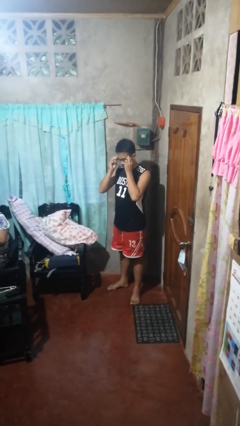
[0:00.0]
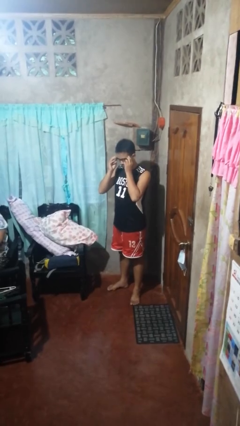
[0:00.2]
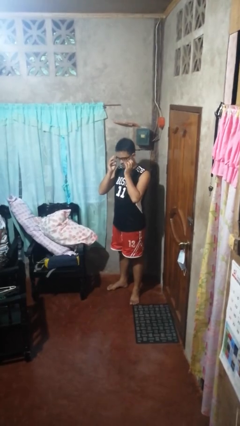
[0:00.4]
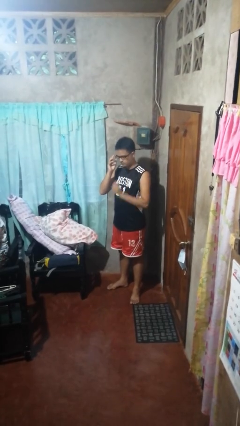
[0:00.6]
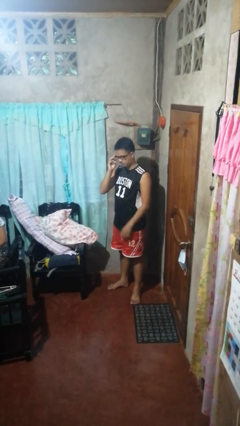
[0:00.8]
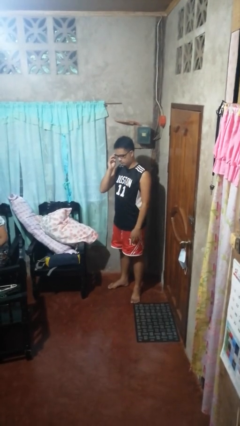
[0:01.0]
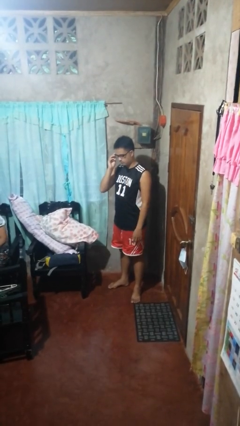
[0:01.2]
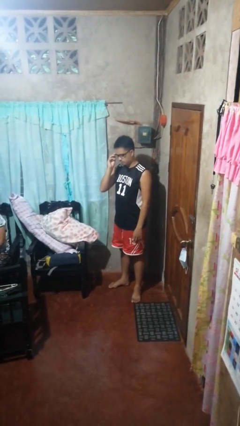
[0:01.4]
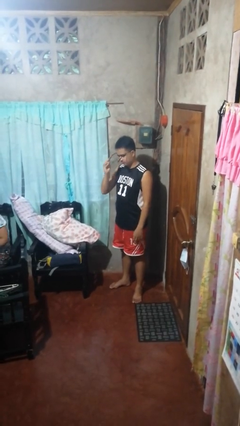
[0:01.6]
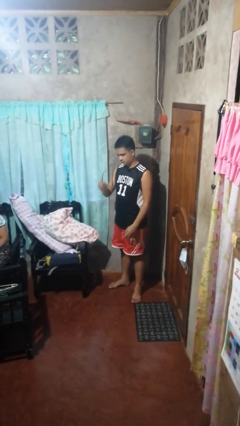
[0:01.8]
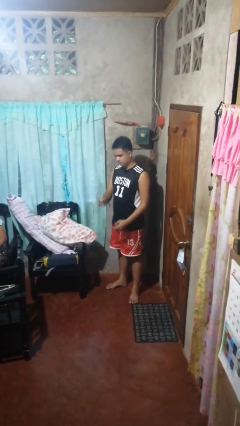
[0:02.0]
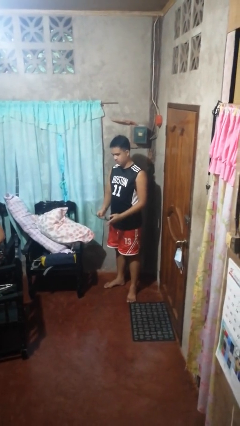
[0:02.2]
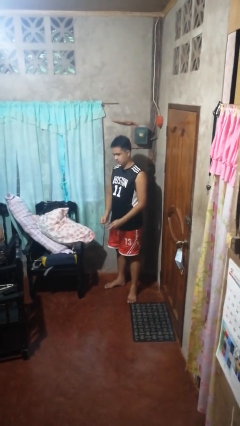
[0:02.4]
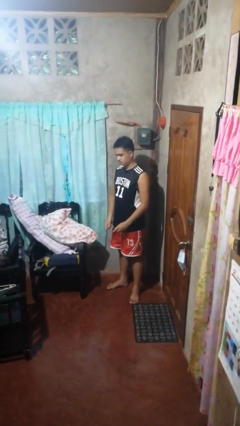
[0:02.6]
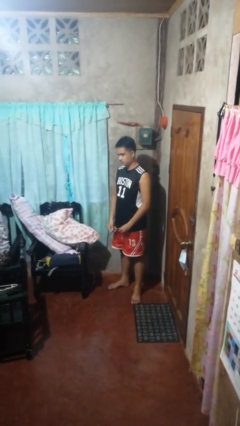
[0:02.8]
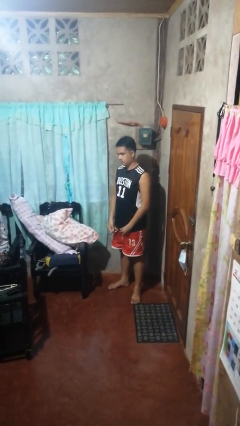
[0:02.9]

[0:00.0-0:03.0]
person takes off glasses

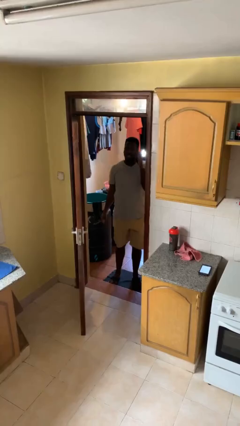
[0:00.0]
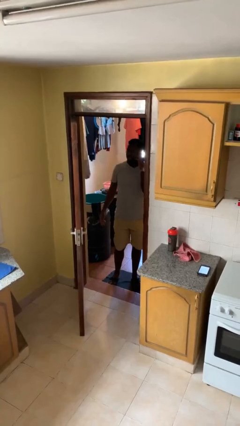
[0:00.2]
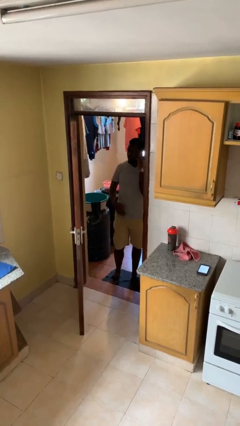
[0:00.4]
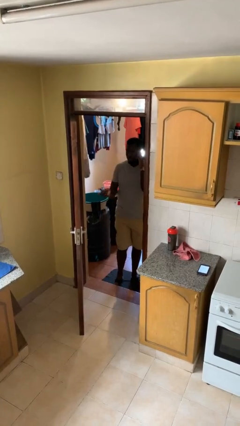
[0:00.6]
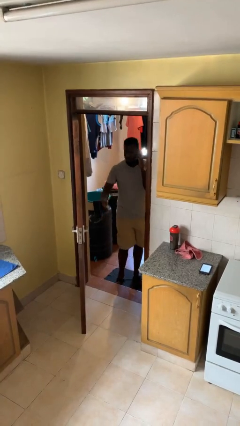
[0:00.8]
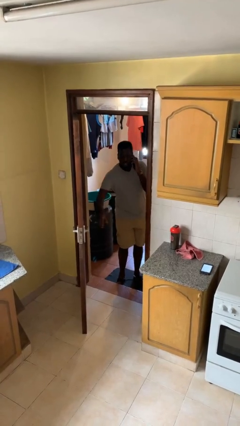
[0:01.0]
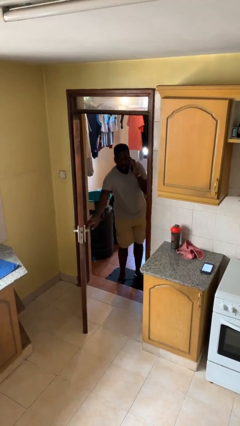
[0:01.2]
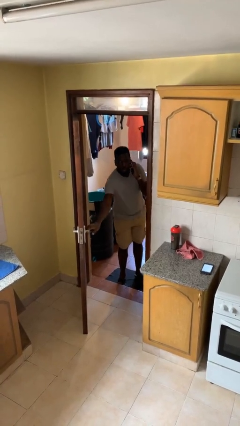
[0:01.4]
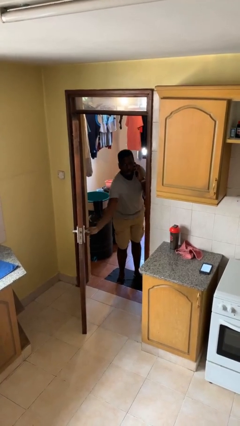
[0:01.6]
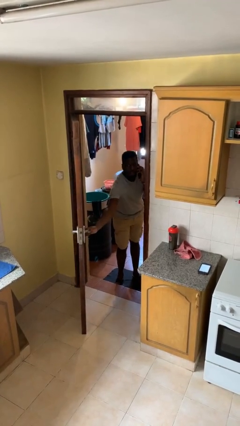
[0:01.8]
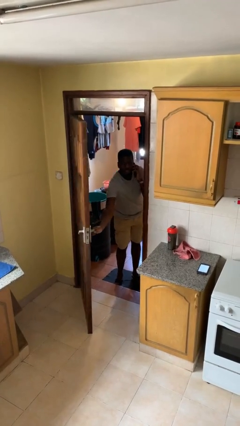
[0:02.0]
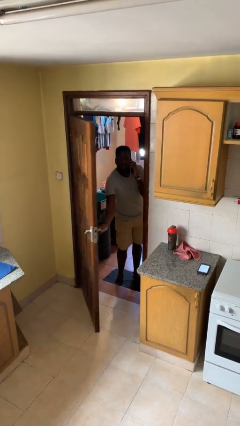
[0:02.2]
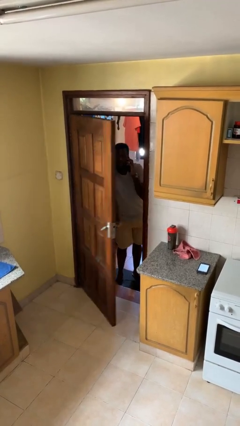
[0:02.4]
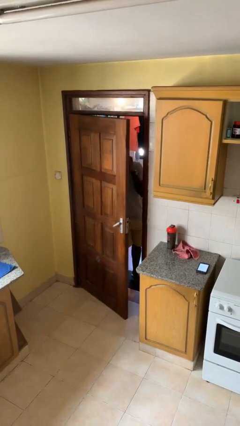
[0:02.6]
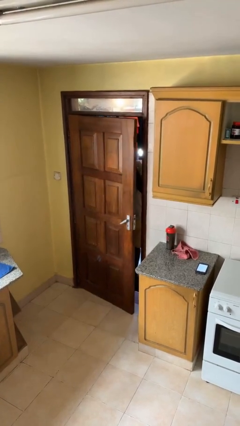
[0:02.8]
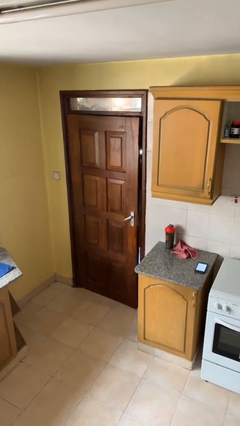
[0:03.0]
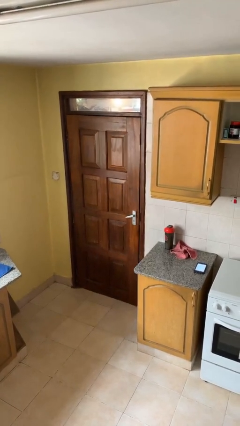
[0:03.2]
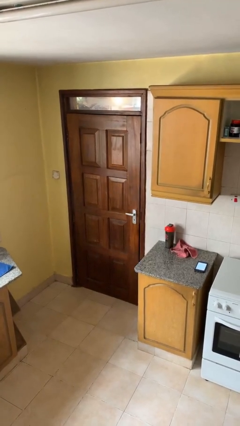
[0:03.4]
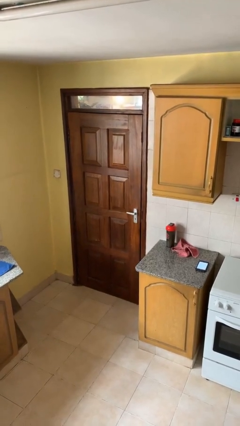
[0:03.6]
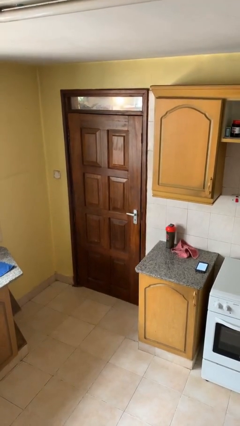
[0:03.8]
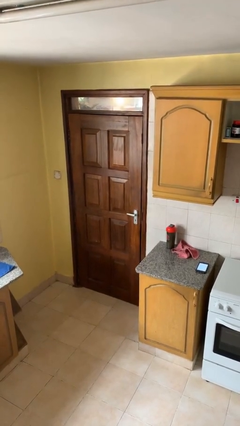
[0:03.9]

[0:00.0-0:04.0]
person closes facility door

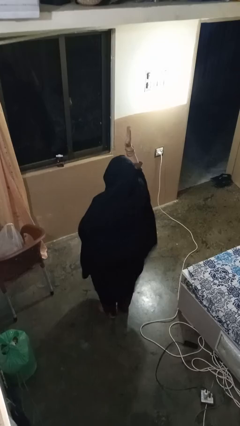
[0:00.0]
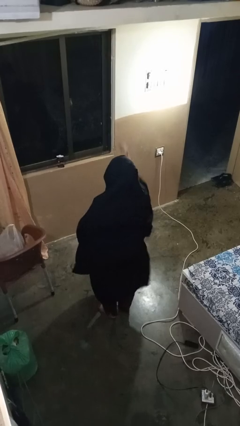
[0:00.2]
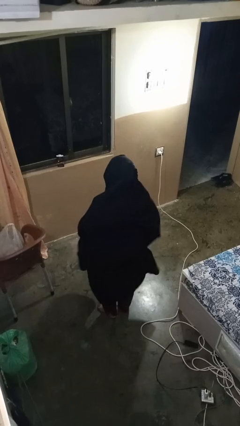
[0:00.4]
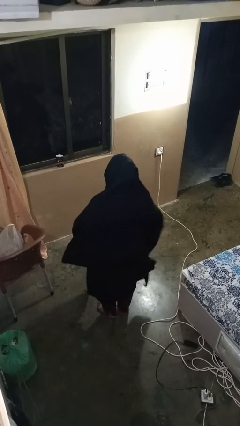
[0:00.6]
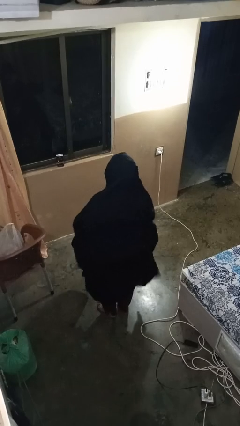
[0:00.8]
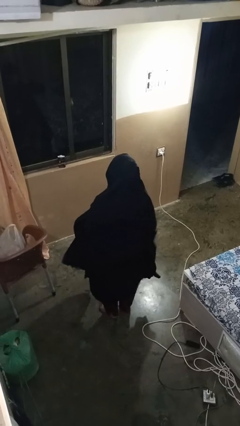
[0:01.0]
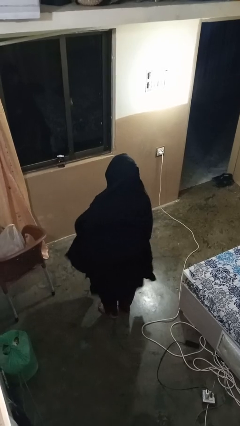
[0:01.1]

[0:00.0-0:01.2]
person gestures lower hand

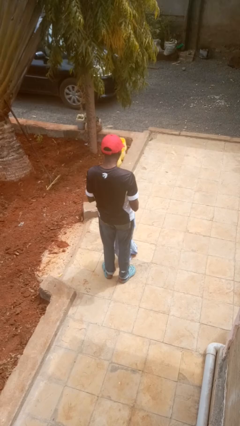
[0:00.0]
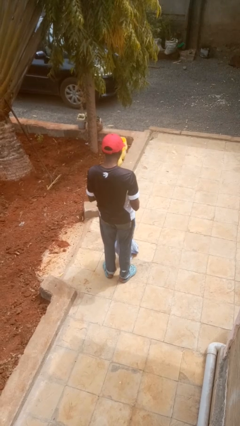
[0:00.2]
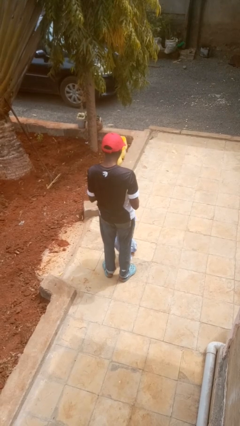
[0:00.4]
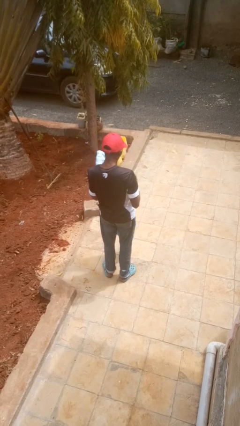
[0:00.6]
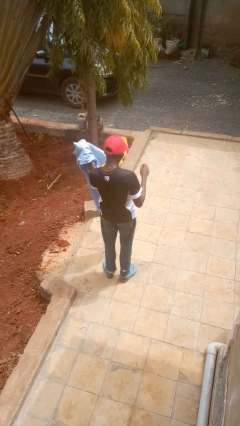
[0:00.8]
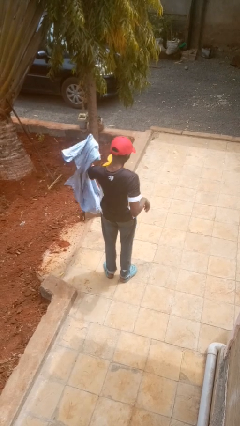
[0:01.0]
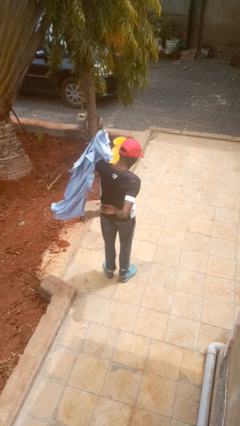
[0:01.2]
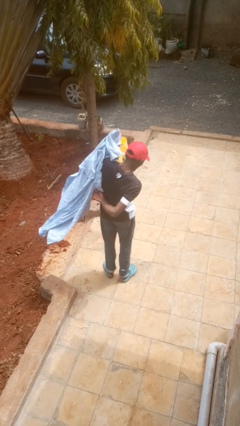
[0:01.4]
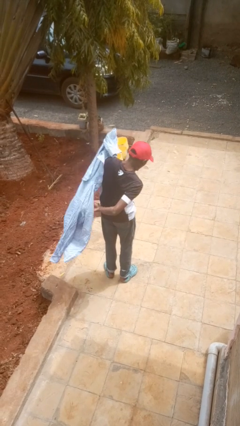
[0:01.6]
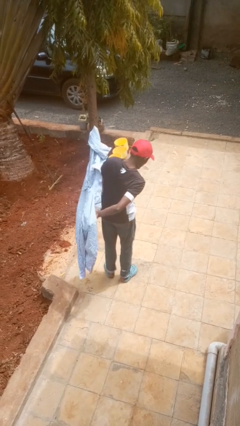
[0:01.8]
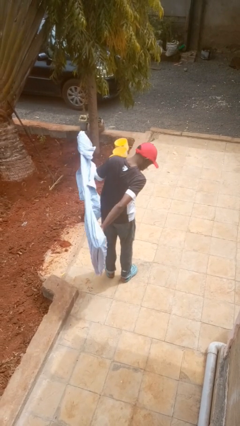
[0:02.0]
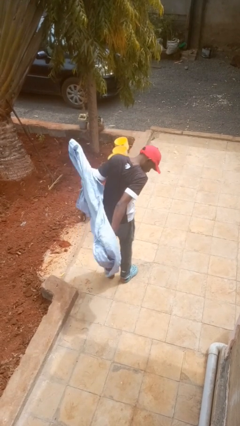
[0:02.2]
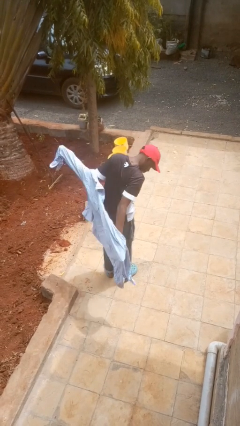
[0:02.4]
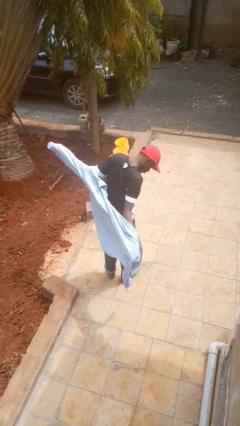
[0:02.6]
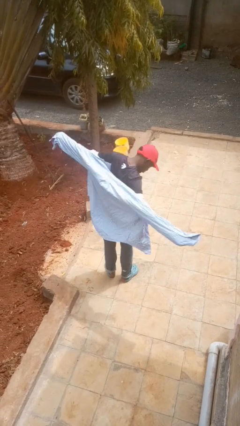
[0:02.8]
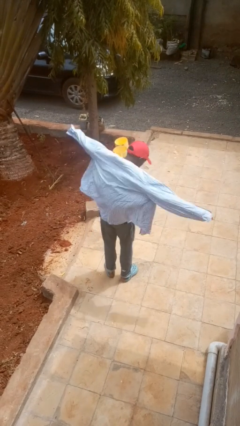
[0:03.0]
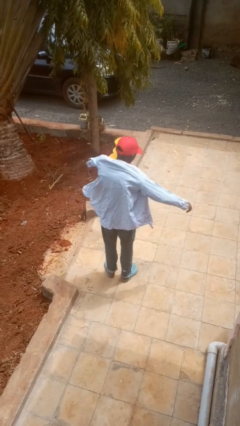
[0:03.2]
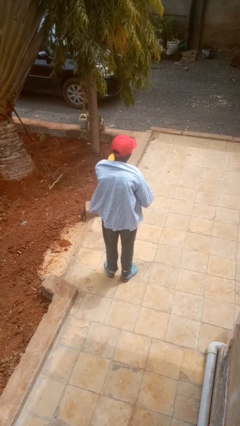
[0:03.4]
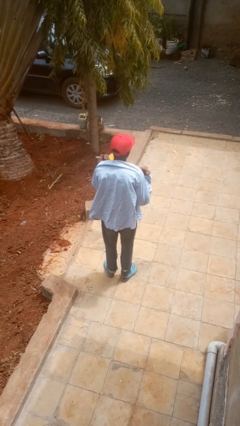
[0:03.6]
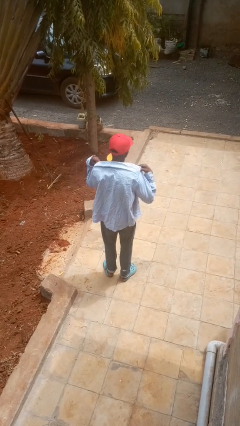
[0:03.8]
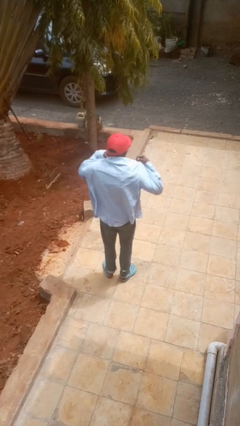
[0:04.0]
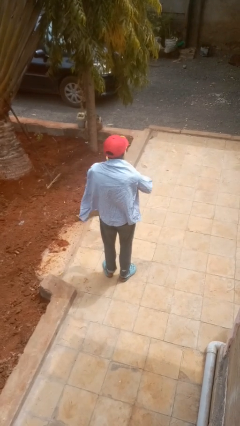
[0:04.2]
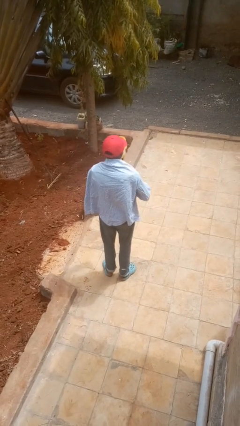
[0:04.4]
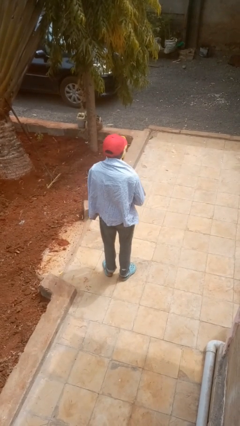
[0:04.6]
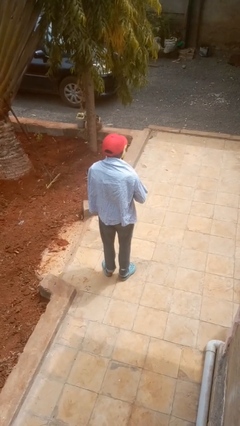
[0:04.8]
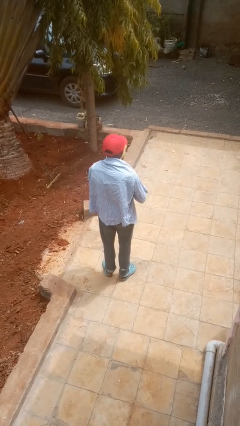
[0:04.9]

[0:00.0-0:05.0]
person puts on shirt

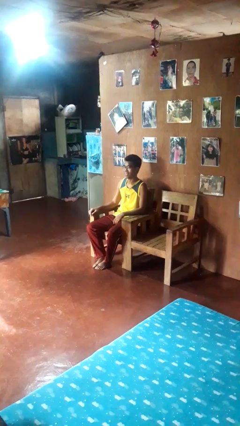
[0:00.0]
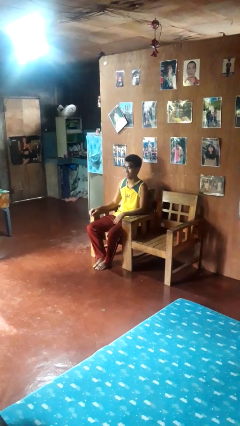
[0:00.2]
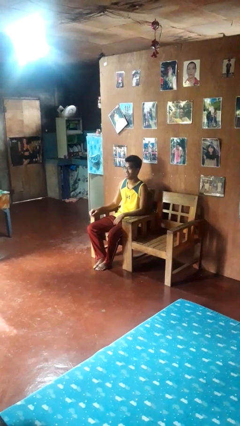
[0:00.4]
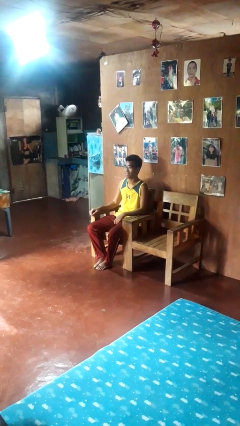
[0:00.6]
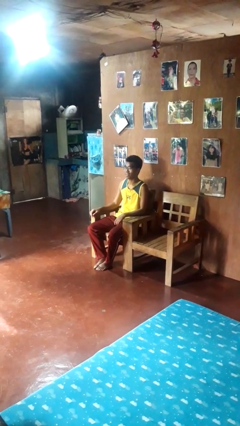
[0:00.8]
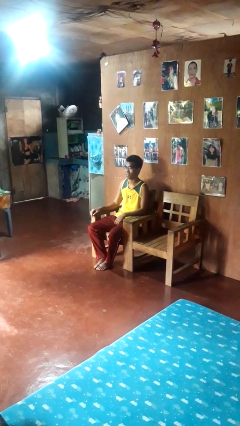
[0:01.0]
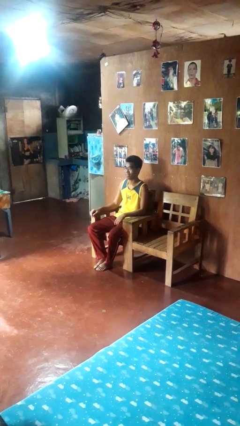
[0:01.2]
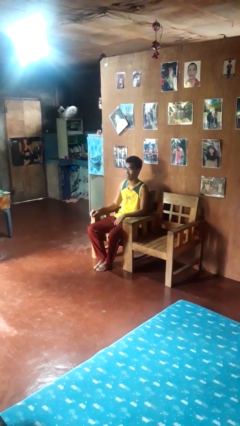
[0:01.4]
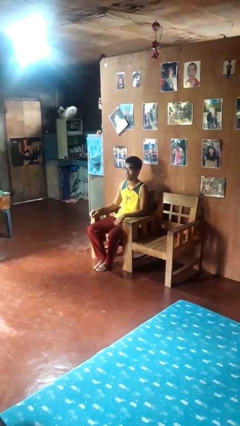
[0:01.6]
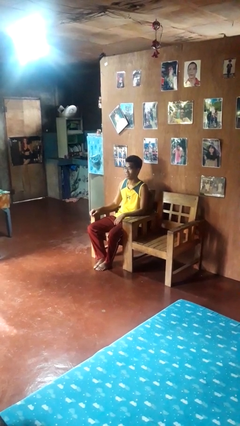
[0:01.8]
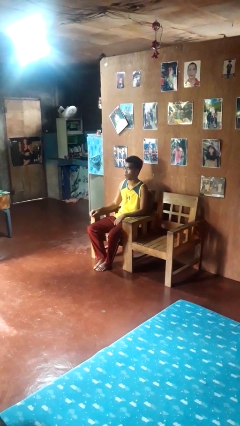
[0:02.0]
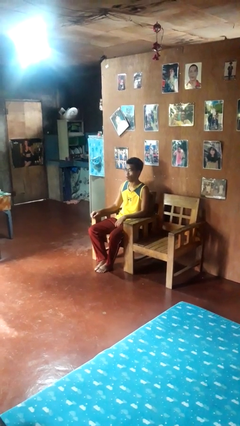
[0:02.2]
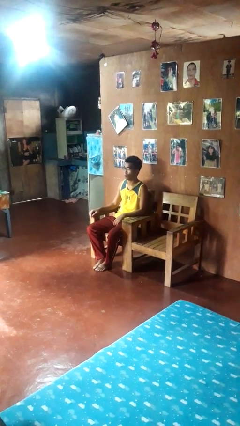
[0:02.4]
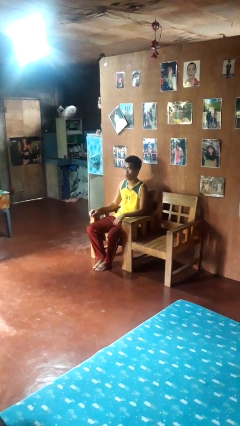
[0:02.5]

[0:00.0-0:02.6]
person nods head

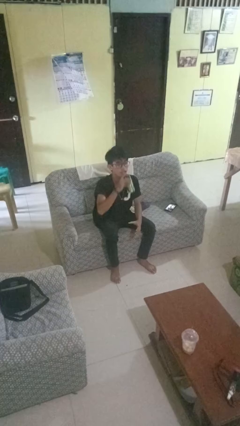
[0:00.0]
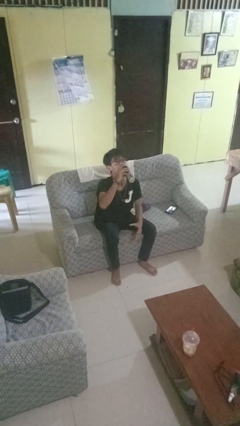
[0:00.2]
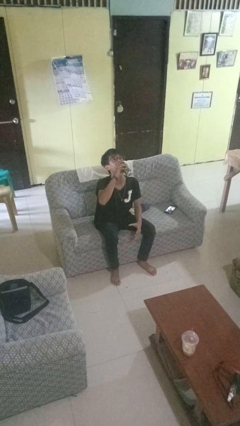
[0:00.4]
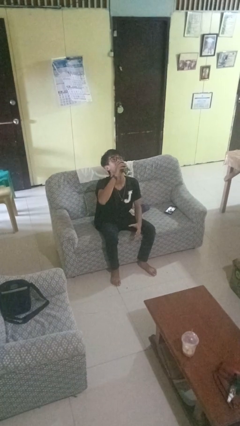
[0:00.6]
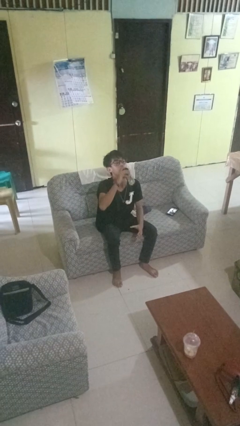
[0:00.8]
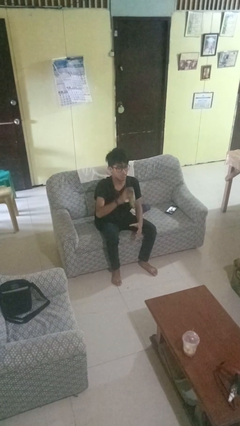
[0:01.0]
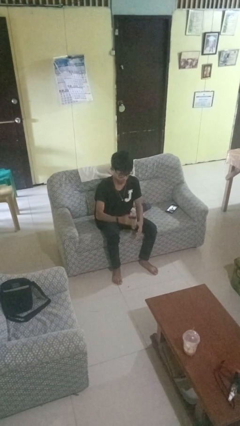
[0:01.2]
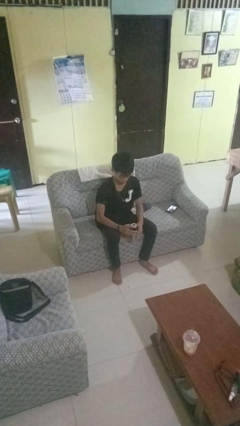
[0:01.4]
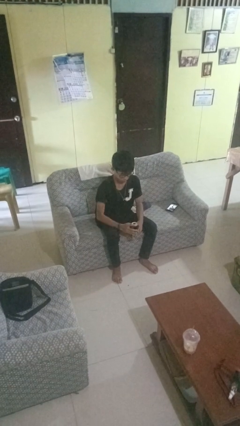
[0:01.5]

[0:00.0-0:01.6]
person drinks from beverage can
